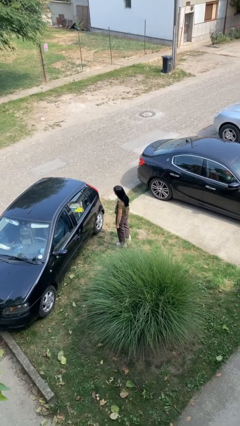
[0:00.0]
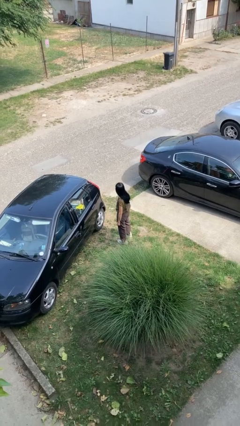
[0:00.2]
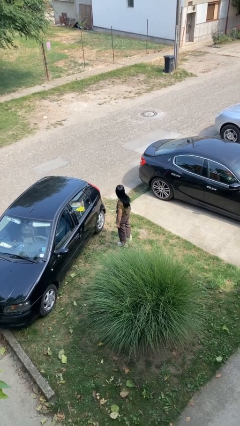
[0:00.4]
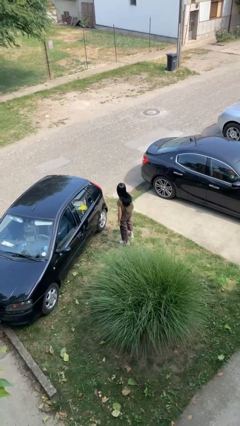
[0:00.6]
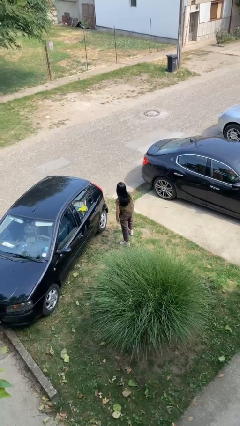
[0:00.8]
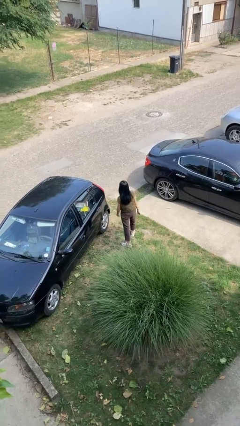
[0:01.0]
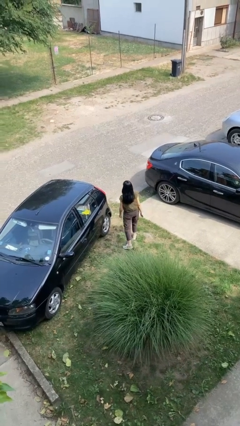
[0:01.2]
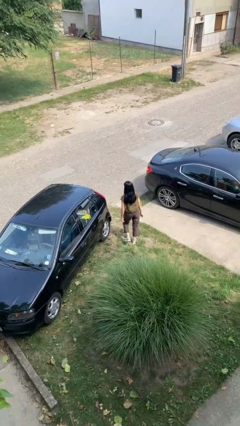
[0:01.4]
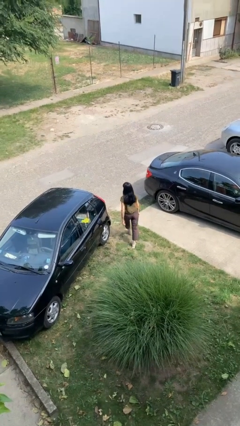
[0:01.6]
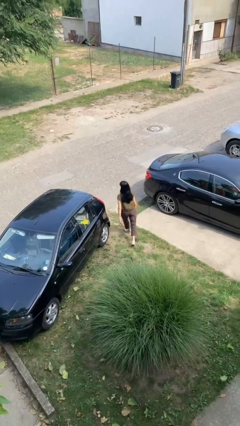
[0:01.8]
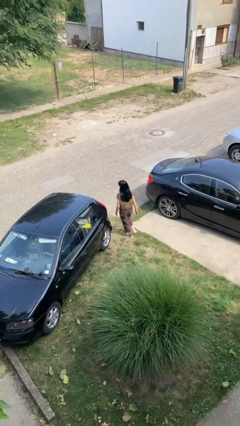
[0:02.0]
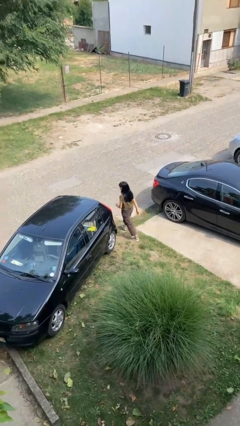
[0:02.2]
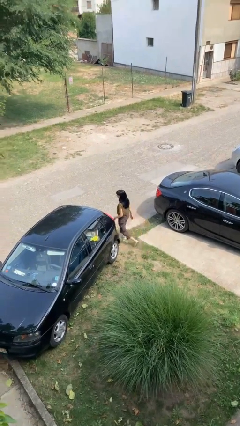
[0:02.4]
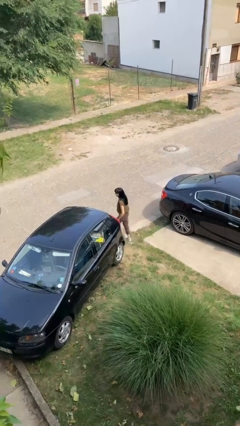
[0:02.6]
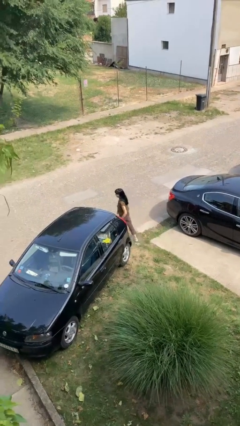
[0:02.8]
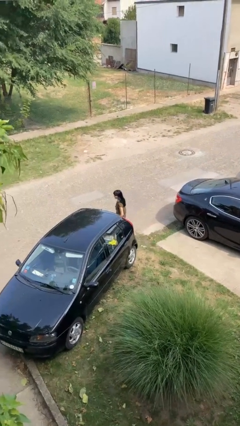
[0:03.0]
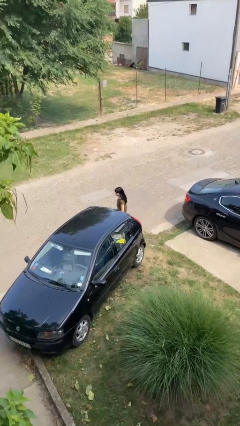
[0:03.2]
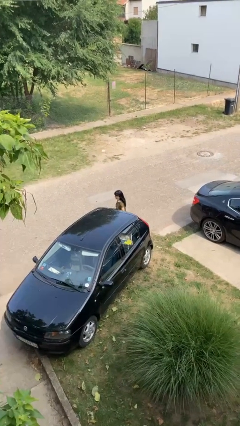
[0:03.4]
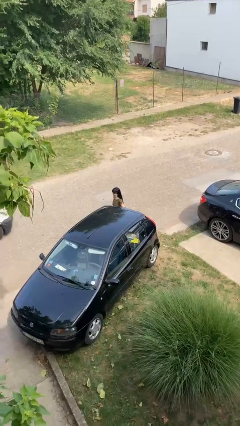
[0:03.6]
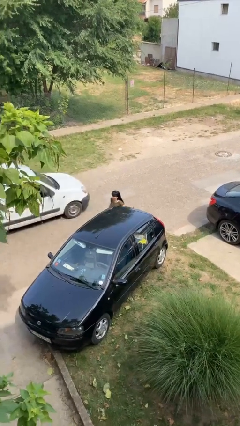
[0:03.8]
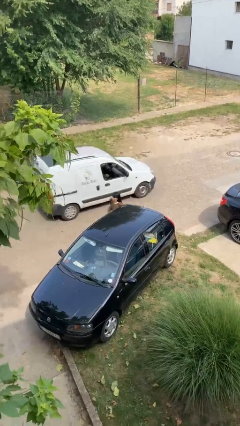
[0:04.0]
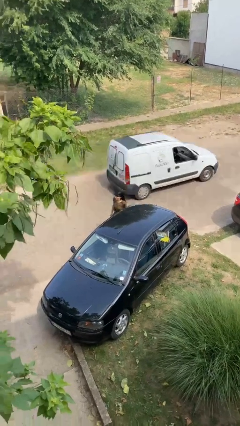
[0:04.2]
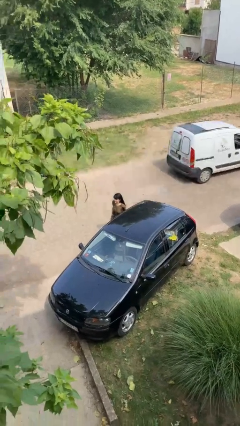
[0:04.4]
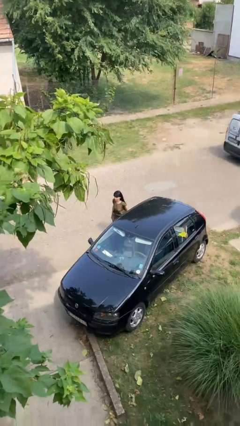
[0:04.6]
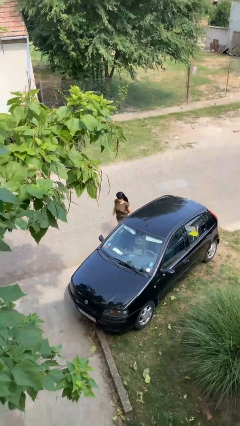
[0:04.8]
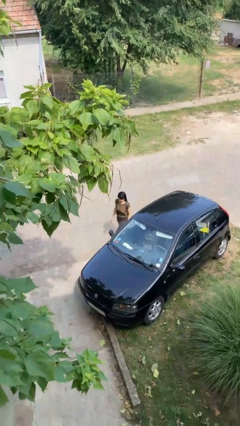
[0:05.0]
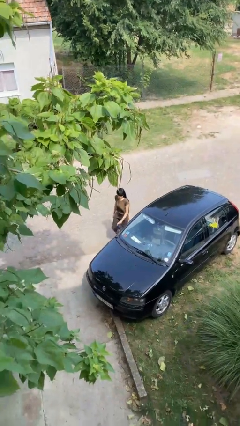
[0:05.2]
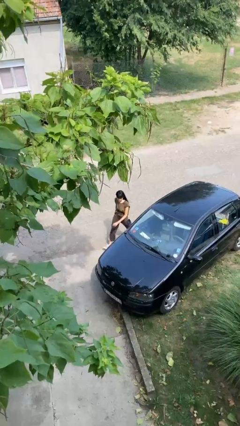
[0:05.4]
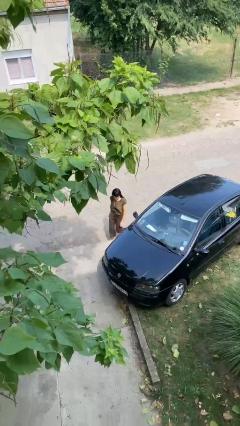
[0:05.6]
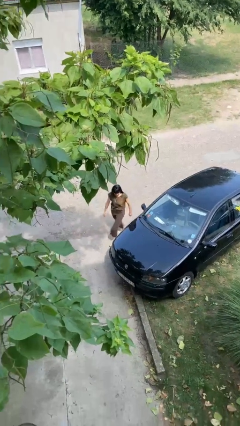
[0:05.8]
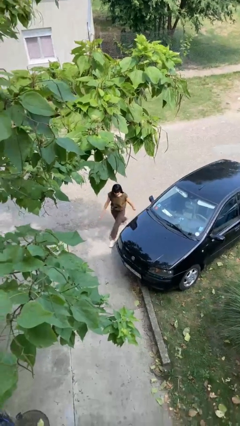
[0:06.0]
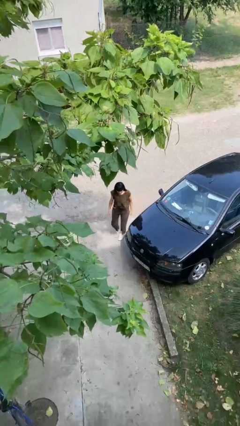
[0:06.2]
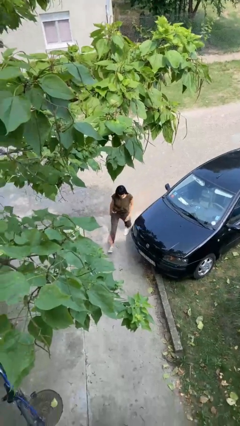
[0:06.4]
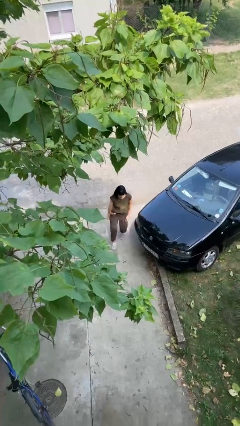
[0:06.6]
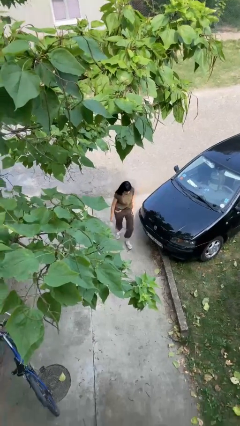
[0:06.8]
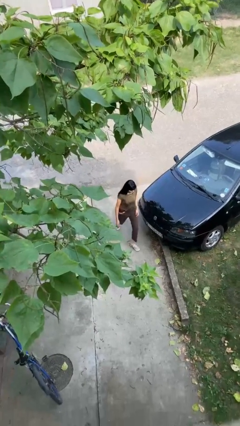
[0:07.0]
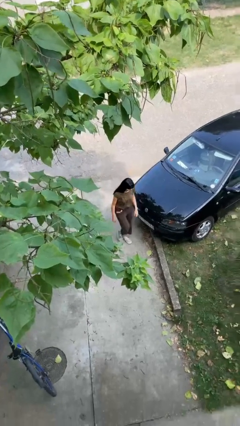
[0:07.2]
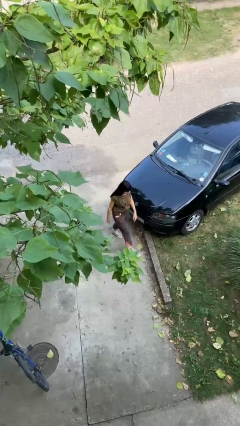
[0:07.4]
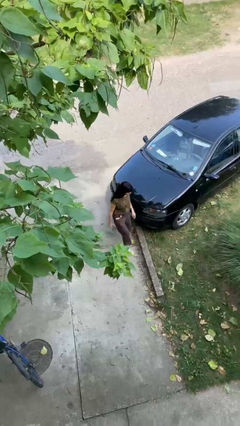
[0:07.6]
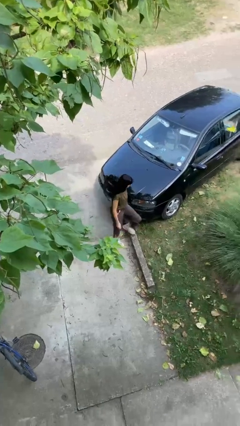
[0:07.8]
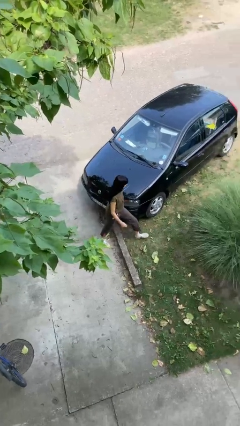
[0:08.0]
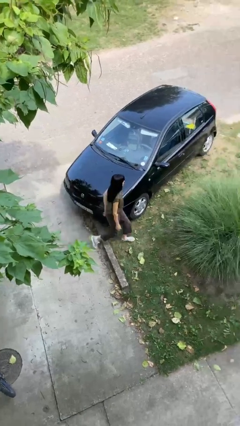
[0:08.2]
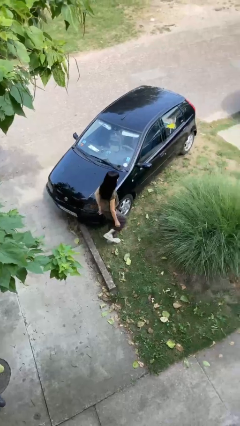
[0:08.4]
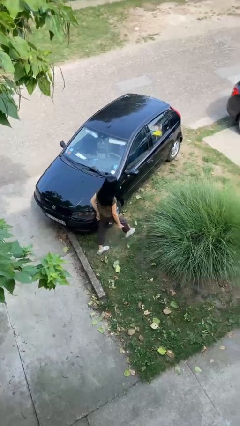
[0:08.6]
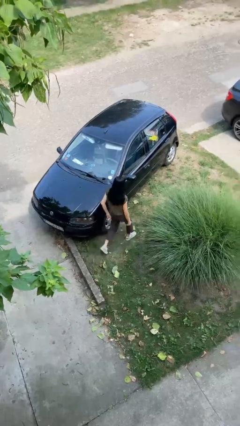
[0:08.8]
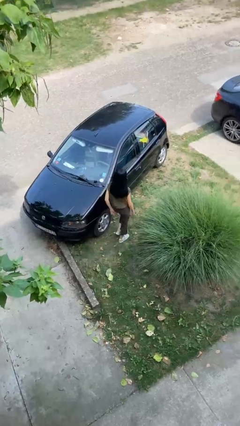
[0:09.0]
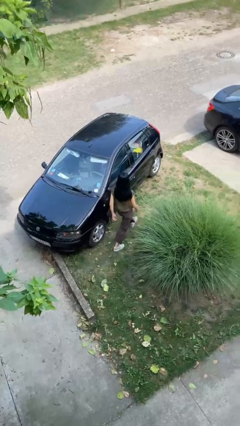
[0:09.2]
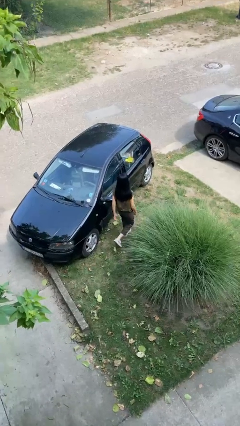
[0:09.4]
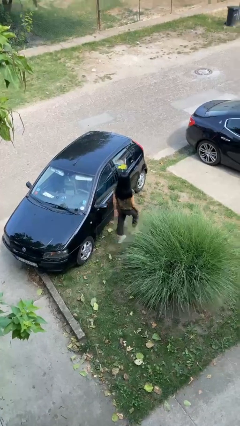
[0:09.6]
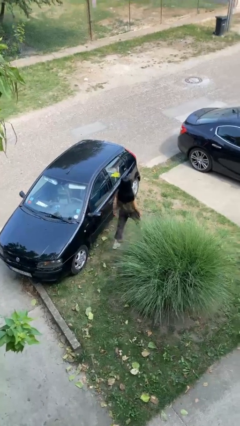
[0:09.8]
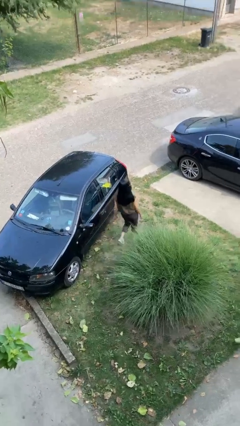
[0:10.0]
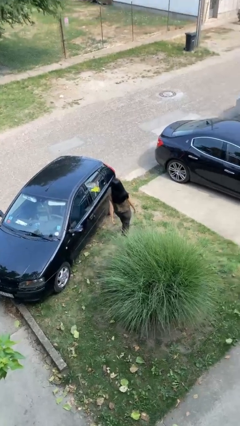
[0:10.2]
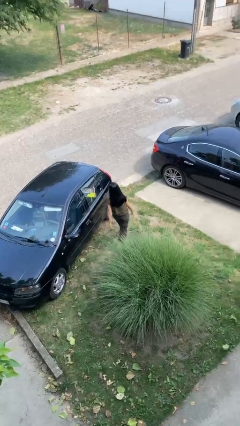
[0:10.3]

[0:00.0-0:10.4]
person walks around car

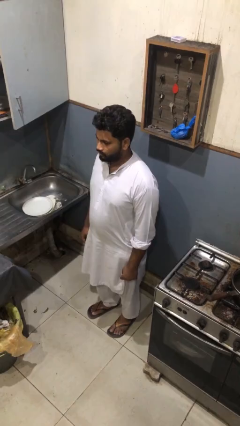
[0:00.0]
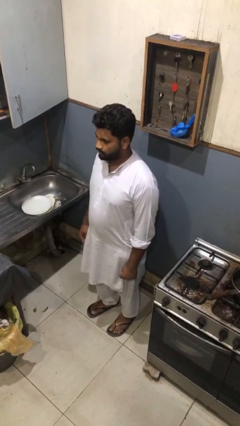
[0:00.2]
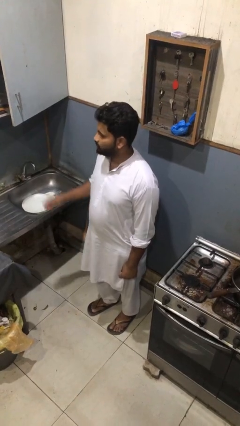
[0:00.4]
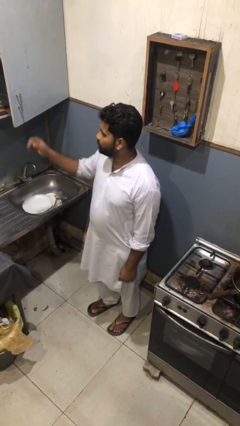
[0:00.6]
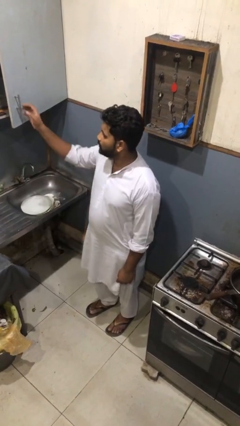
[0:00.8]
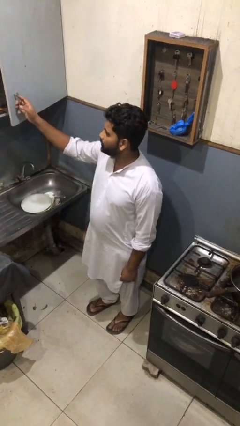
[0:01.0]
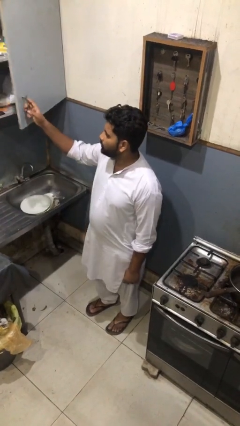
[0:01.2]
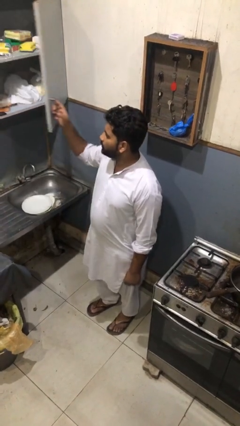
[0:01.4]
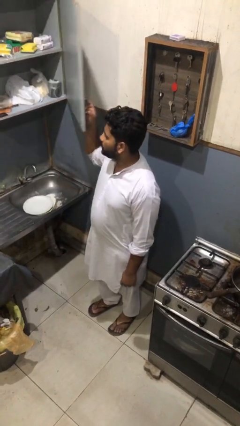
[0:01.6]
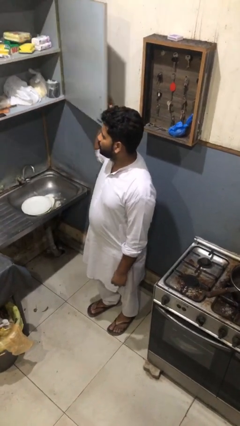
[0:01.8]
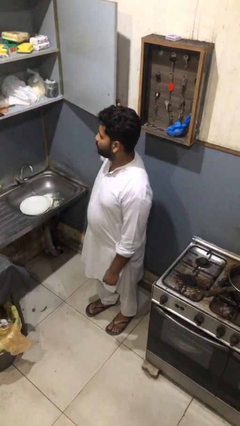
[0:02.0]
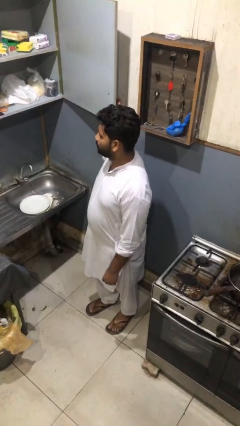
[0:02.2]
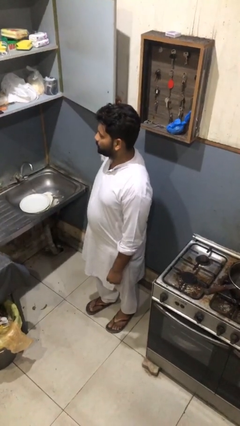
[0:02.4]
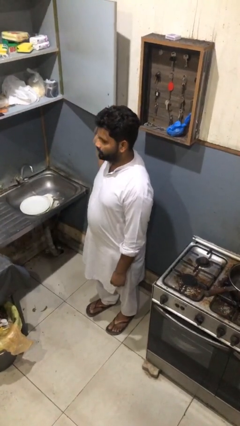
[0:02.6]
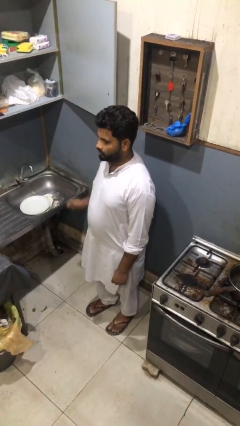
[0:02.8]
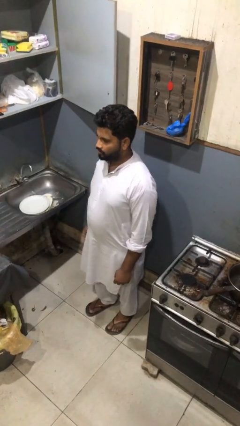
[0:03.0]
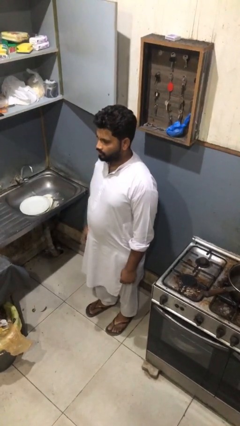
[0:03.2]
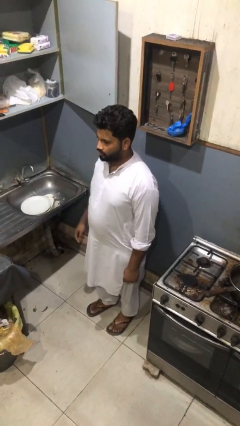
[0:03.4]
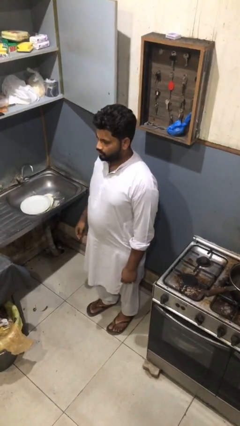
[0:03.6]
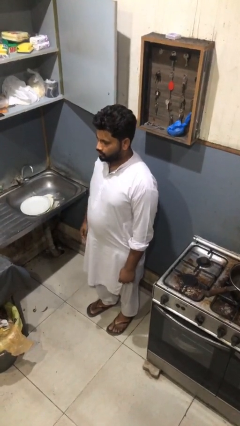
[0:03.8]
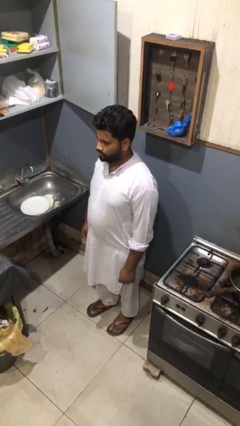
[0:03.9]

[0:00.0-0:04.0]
person opens cabinet

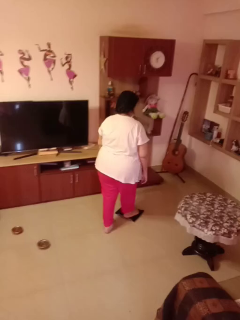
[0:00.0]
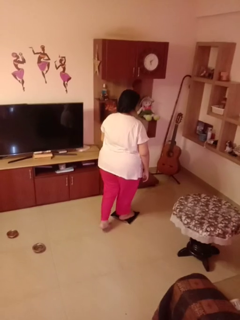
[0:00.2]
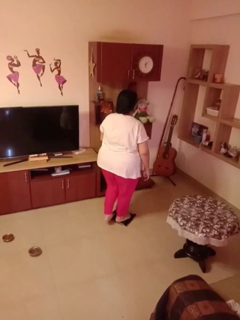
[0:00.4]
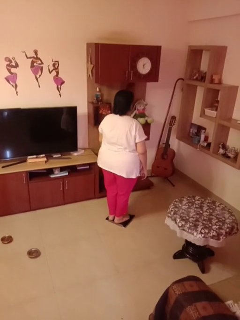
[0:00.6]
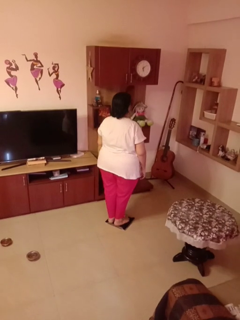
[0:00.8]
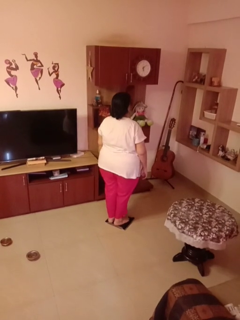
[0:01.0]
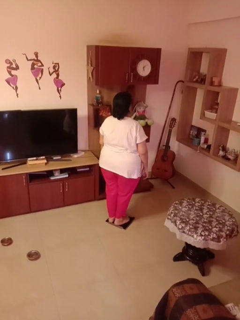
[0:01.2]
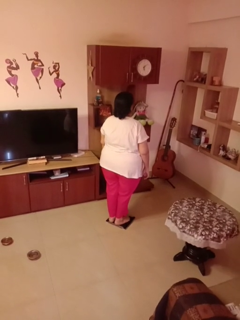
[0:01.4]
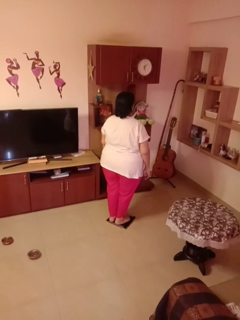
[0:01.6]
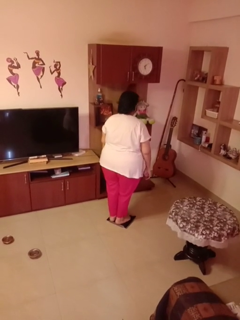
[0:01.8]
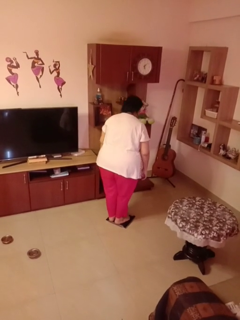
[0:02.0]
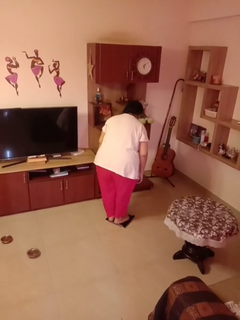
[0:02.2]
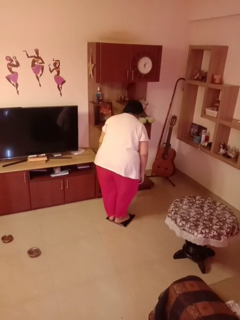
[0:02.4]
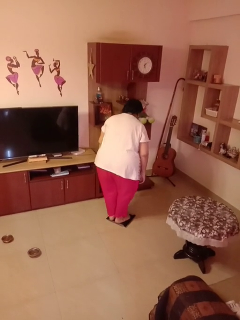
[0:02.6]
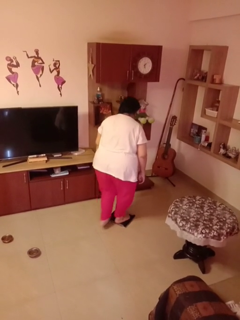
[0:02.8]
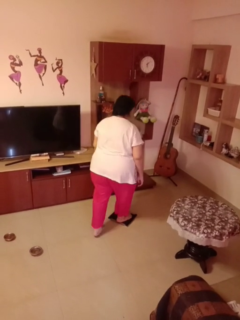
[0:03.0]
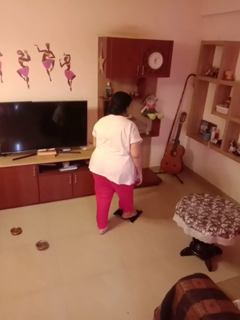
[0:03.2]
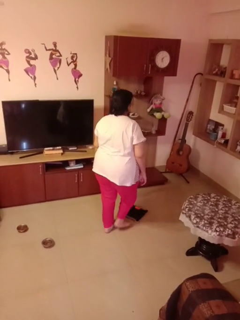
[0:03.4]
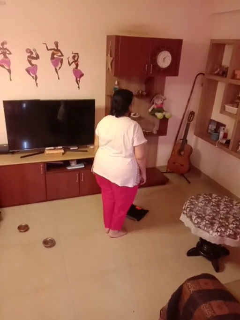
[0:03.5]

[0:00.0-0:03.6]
person uses bodyweight scale

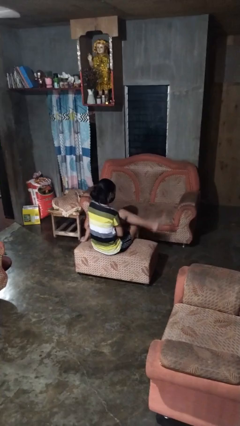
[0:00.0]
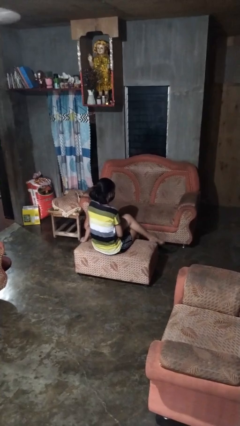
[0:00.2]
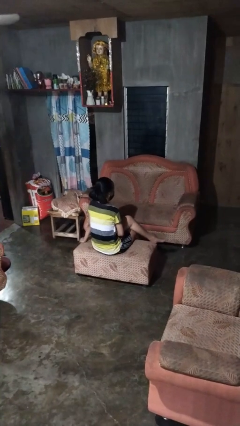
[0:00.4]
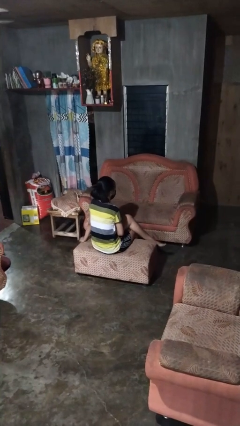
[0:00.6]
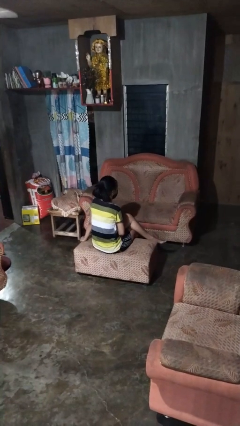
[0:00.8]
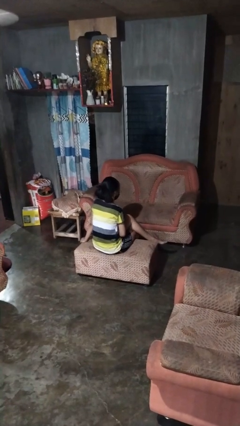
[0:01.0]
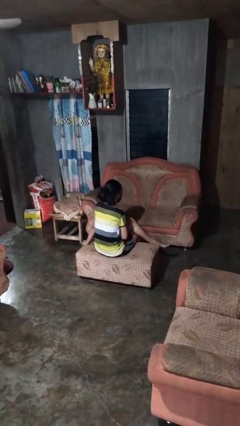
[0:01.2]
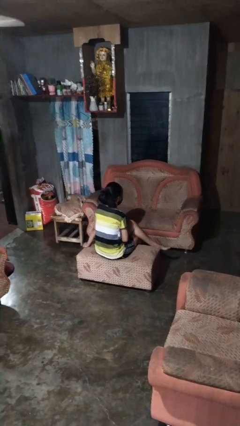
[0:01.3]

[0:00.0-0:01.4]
person crosses legs
